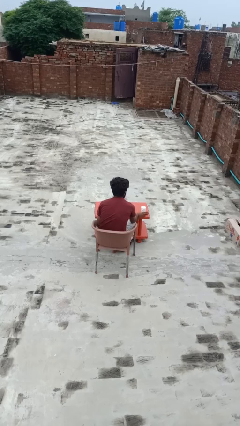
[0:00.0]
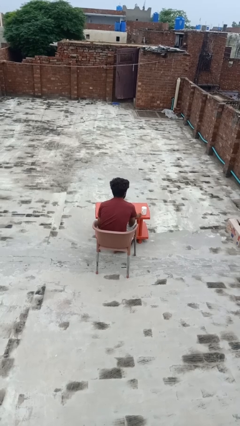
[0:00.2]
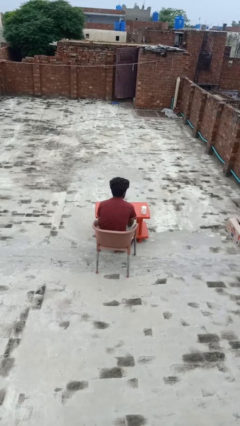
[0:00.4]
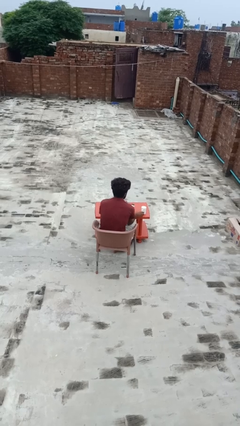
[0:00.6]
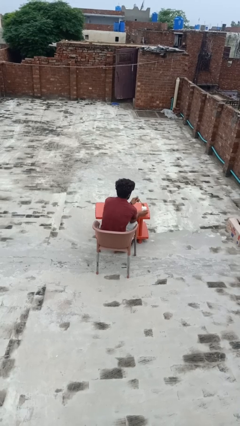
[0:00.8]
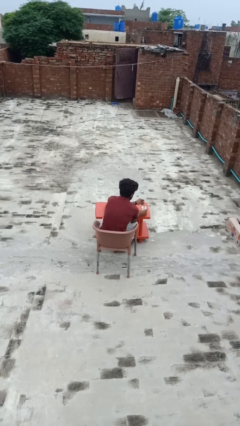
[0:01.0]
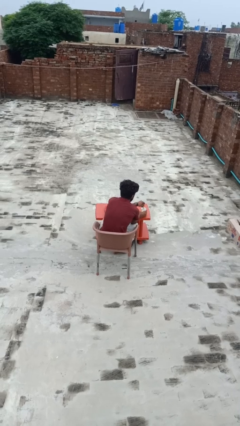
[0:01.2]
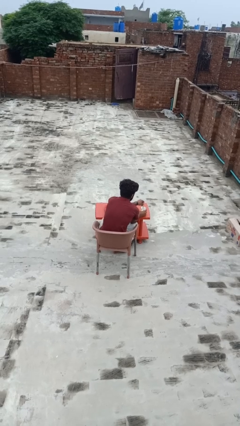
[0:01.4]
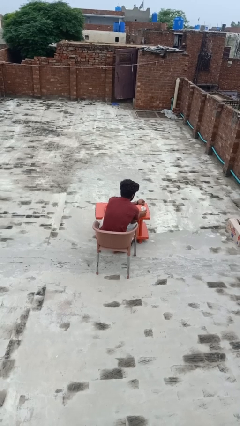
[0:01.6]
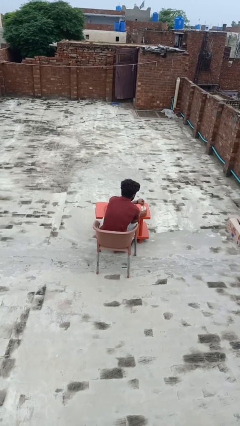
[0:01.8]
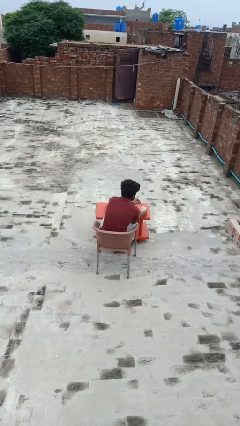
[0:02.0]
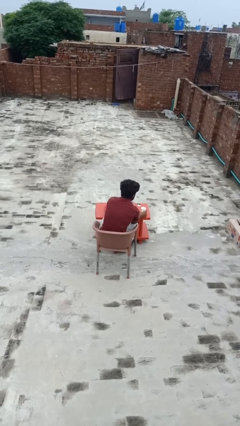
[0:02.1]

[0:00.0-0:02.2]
person stirs mug

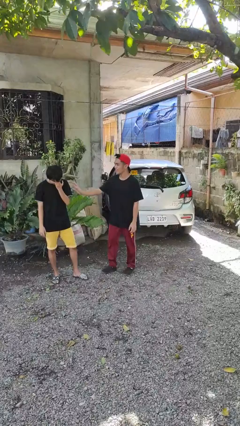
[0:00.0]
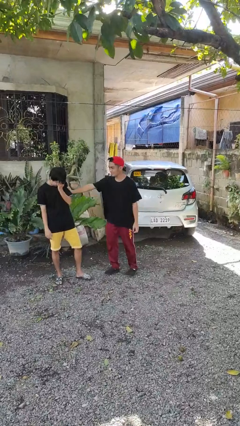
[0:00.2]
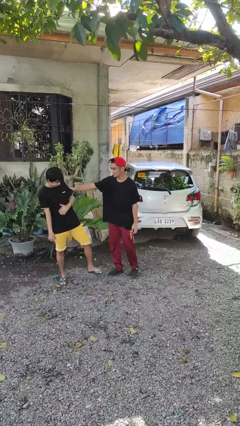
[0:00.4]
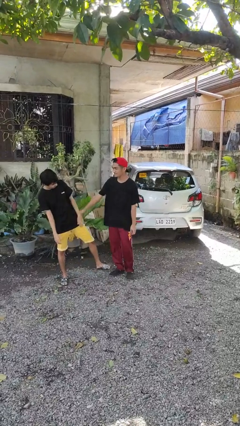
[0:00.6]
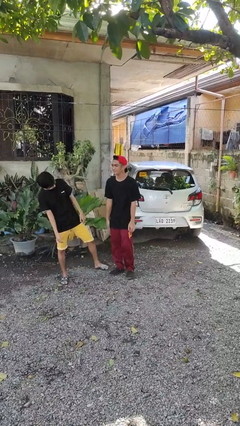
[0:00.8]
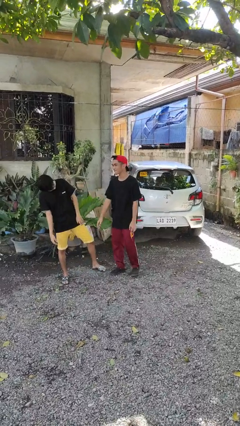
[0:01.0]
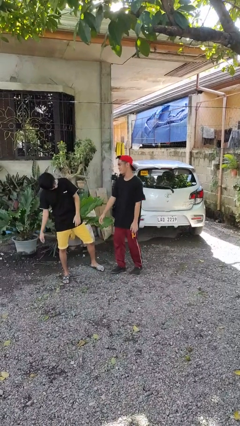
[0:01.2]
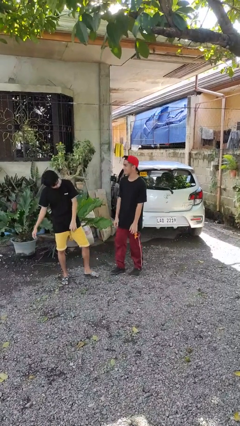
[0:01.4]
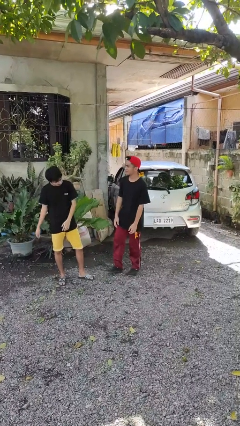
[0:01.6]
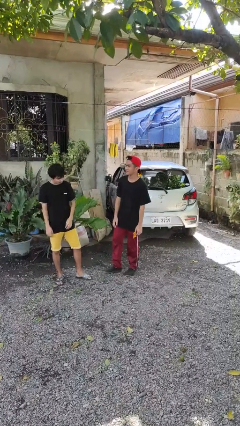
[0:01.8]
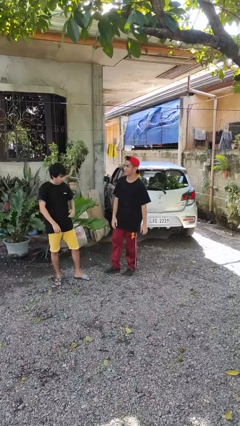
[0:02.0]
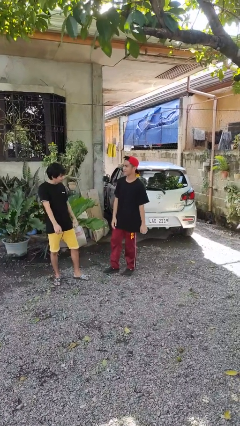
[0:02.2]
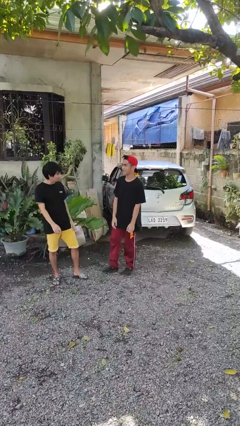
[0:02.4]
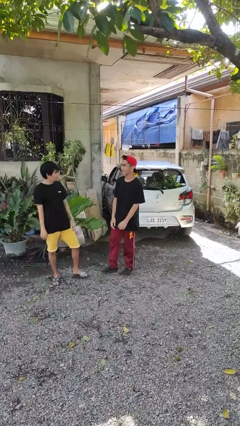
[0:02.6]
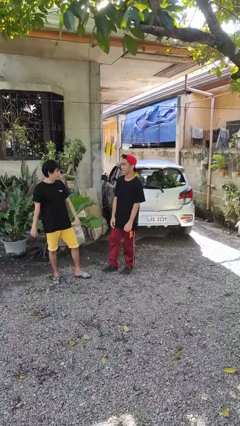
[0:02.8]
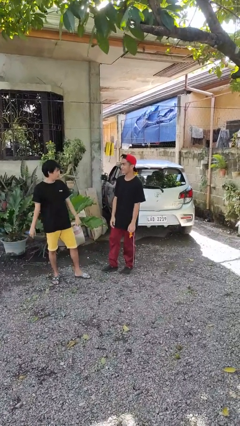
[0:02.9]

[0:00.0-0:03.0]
person shoves person

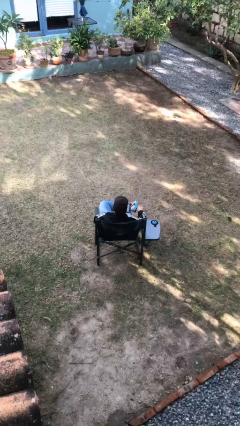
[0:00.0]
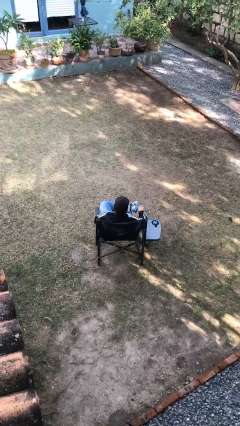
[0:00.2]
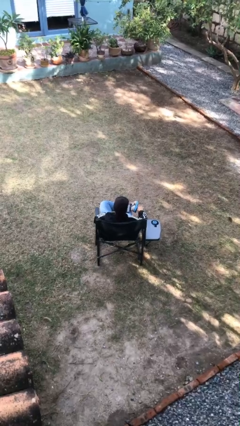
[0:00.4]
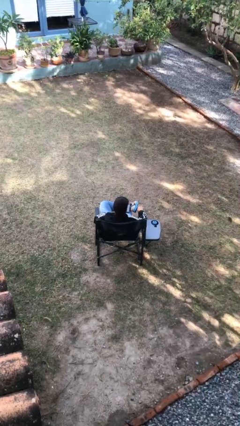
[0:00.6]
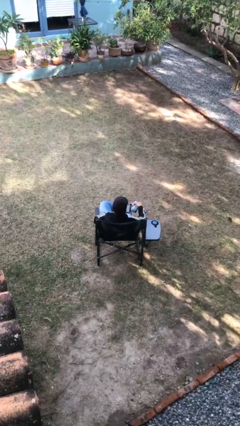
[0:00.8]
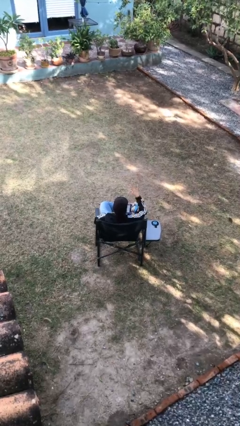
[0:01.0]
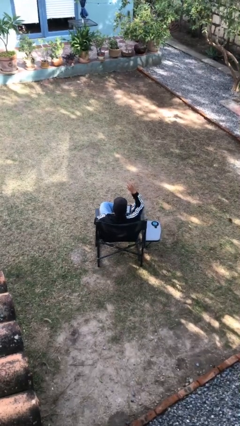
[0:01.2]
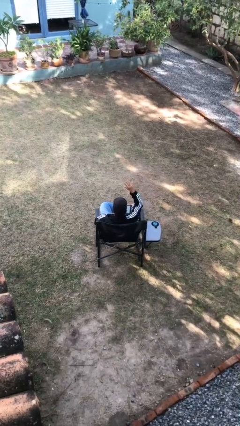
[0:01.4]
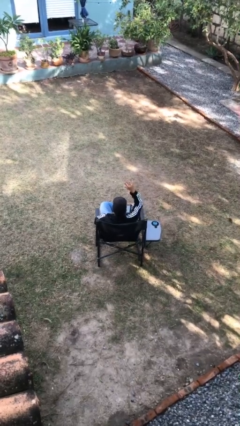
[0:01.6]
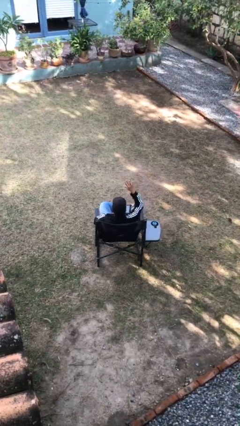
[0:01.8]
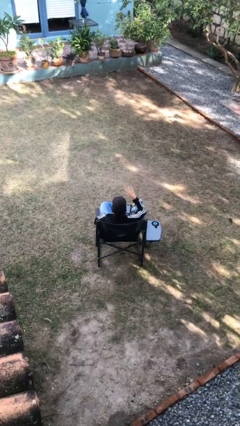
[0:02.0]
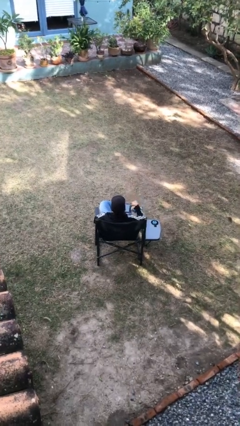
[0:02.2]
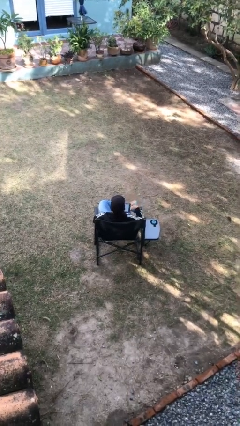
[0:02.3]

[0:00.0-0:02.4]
person gestures number five

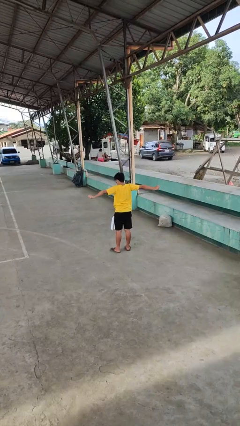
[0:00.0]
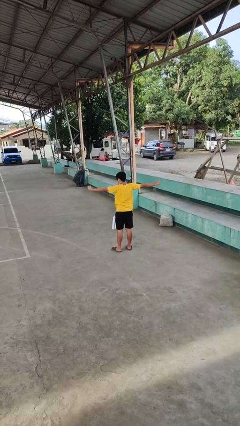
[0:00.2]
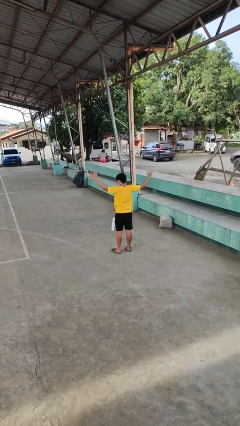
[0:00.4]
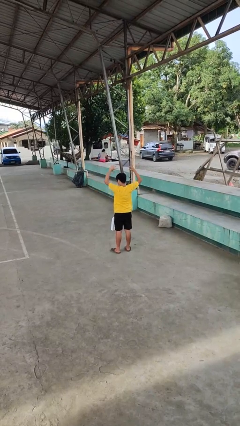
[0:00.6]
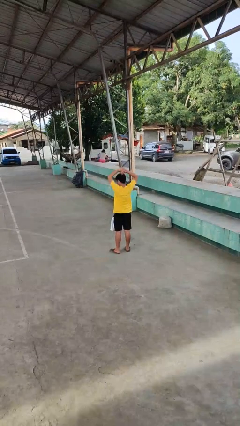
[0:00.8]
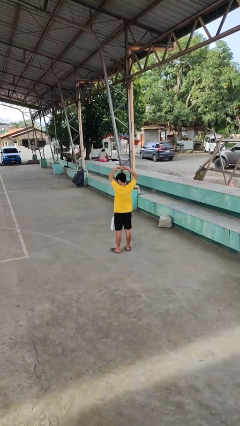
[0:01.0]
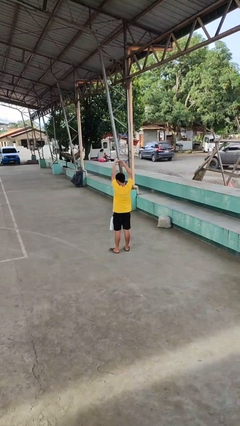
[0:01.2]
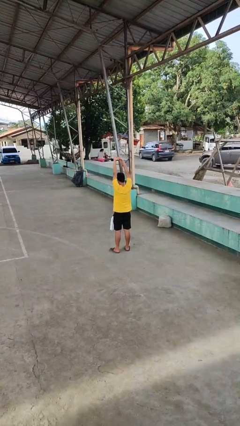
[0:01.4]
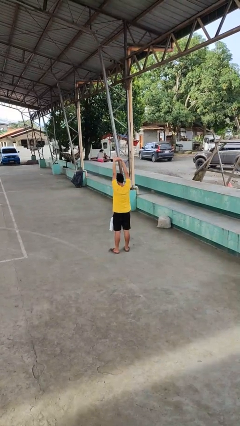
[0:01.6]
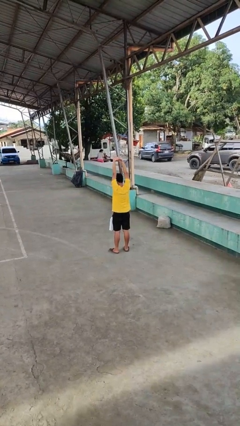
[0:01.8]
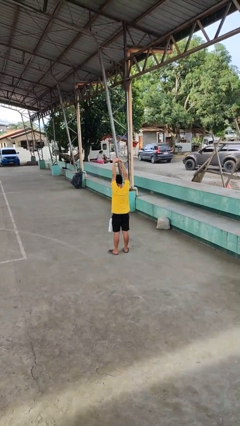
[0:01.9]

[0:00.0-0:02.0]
person stretches arms over head

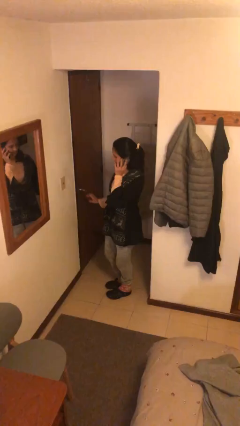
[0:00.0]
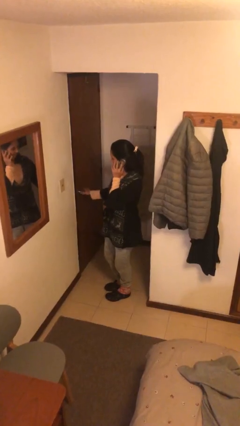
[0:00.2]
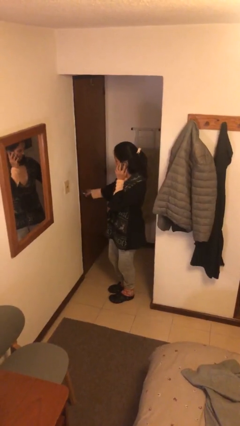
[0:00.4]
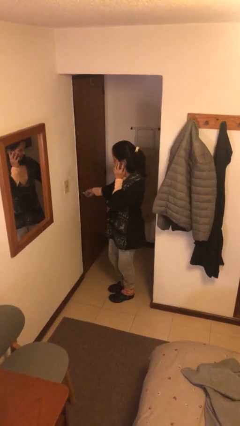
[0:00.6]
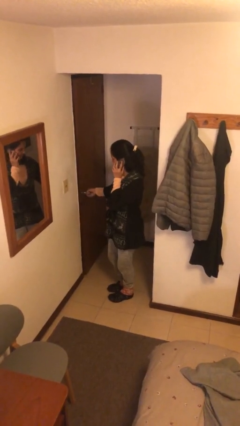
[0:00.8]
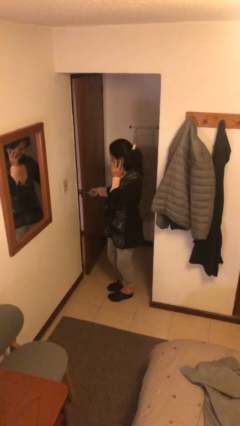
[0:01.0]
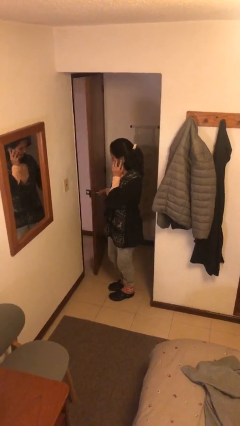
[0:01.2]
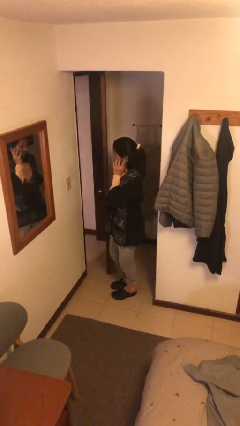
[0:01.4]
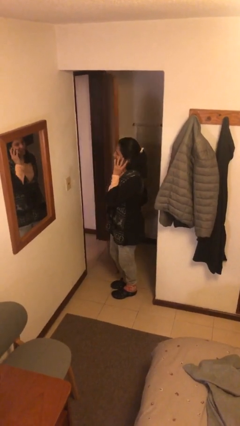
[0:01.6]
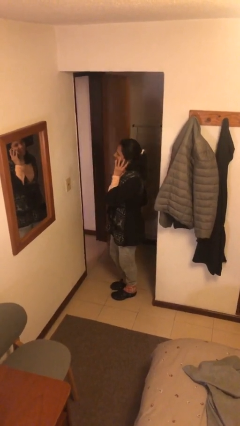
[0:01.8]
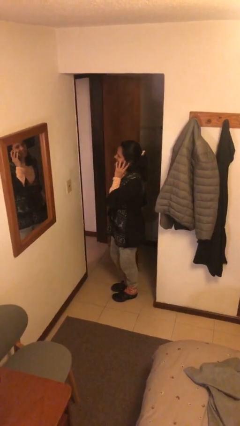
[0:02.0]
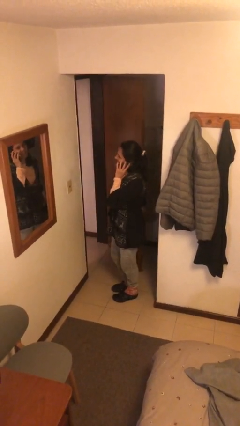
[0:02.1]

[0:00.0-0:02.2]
person opens facility door

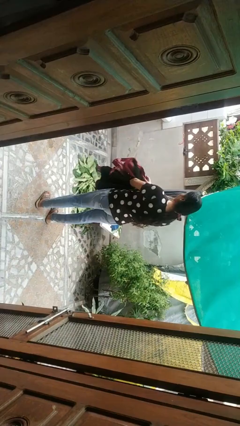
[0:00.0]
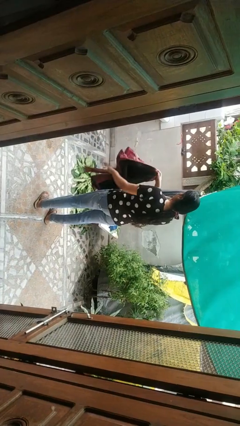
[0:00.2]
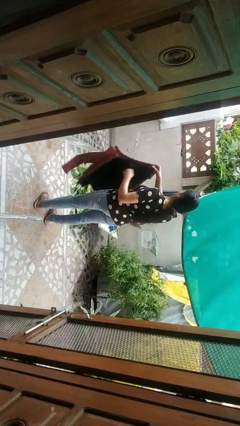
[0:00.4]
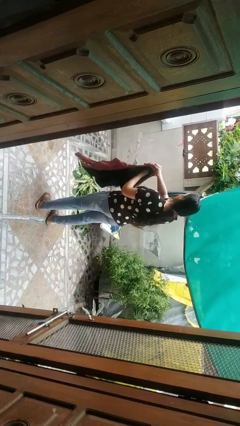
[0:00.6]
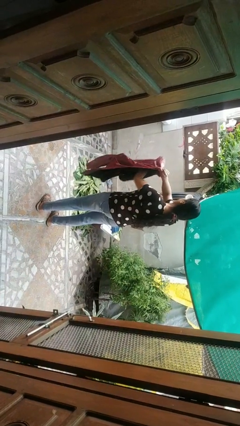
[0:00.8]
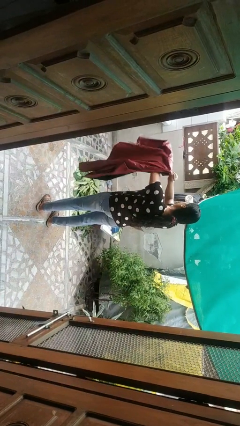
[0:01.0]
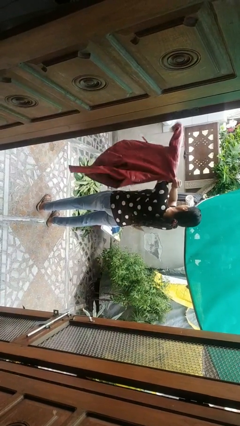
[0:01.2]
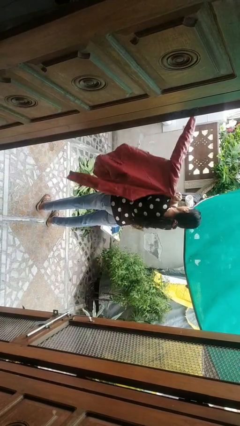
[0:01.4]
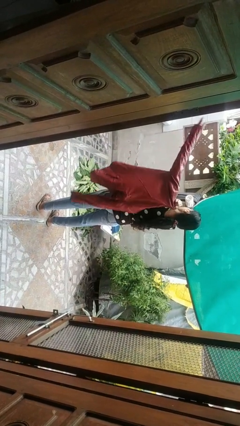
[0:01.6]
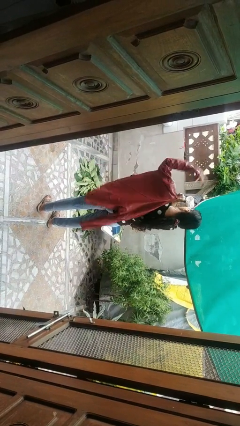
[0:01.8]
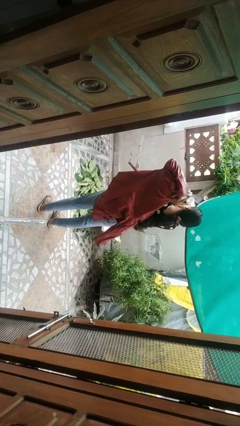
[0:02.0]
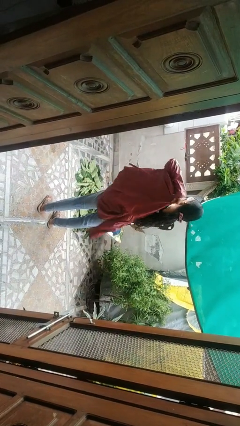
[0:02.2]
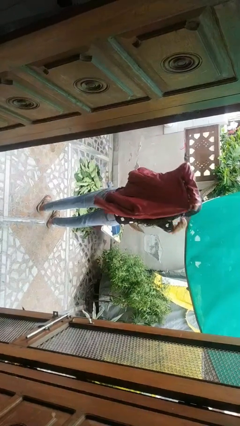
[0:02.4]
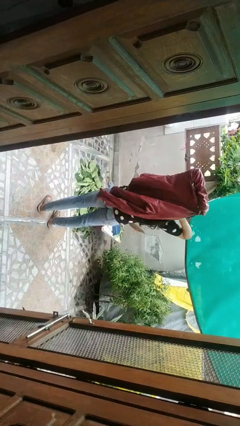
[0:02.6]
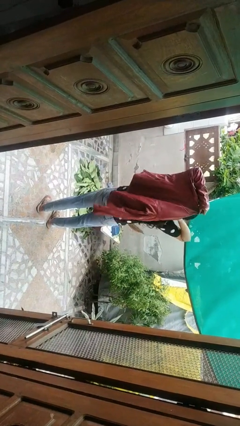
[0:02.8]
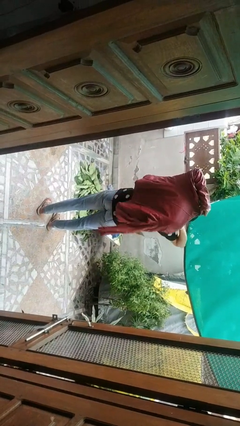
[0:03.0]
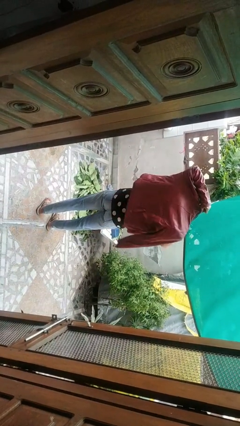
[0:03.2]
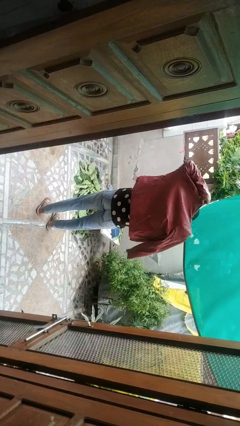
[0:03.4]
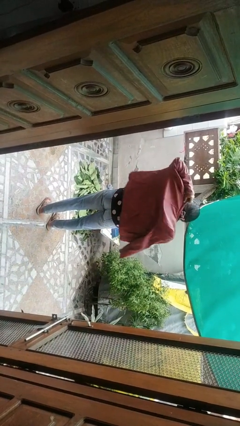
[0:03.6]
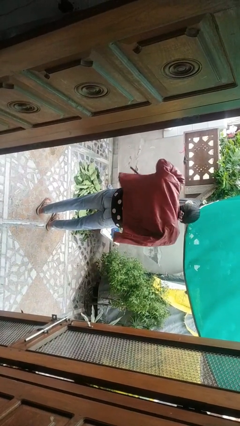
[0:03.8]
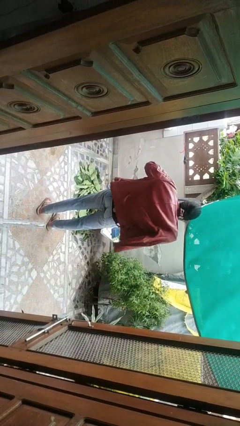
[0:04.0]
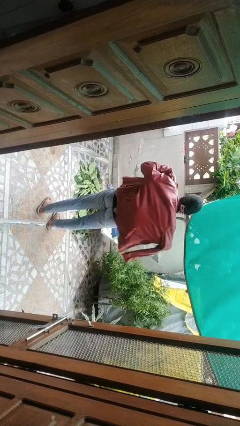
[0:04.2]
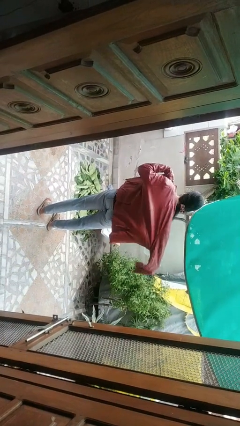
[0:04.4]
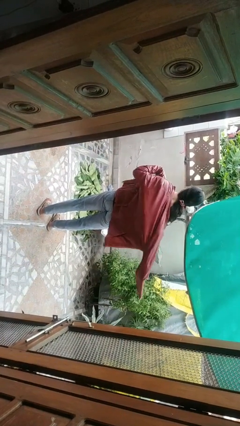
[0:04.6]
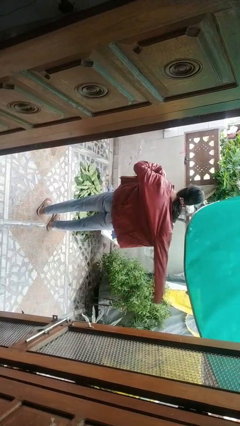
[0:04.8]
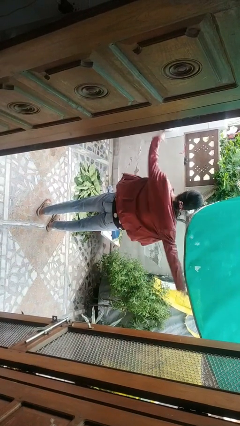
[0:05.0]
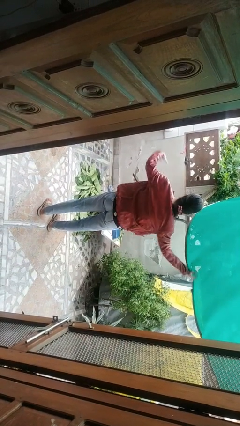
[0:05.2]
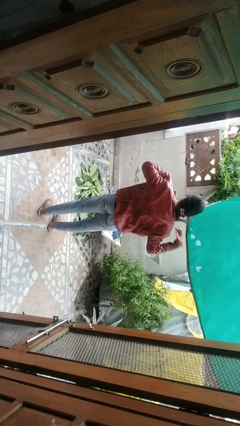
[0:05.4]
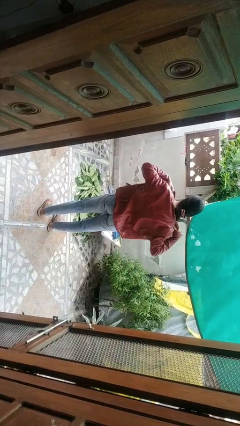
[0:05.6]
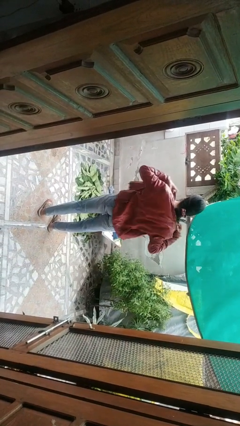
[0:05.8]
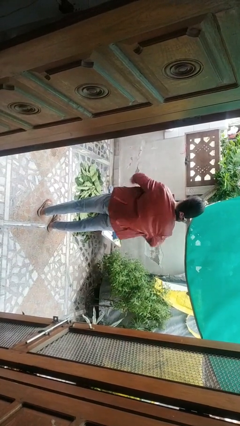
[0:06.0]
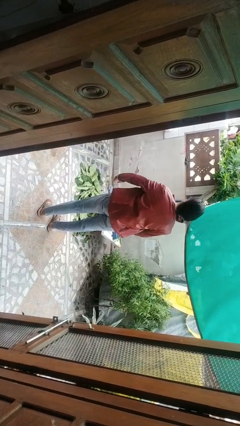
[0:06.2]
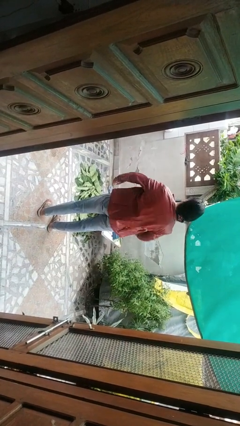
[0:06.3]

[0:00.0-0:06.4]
person puts on jacket
